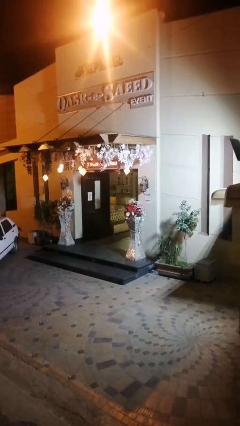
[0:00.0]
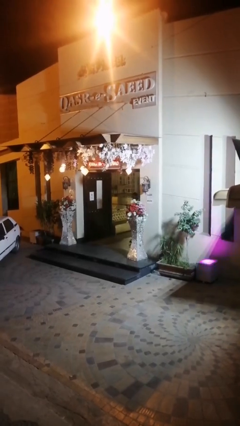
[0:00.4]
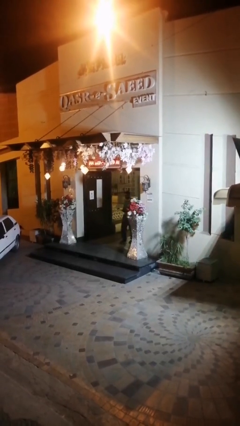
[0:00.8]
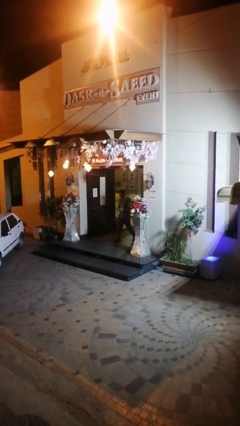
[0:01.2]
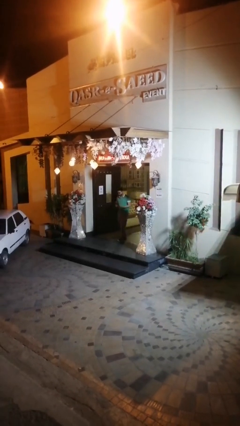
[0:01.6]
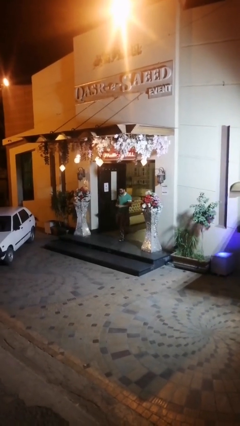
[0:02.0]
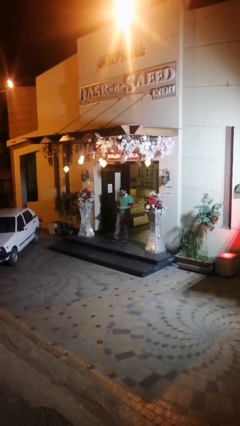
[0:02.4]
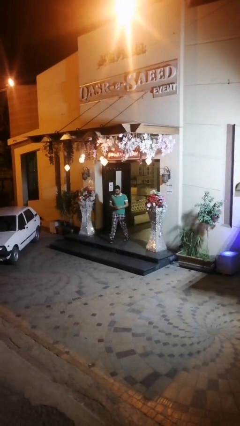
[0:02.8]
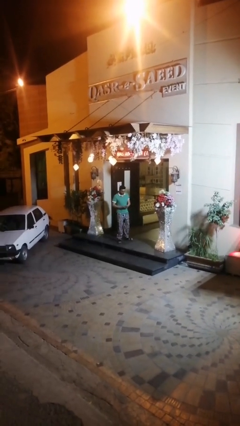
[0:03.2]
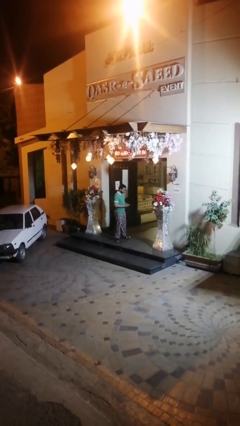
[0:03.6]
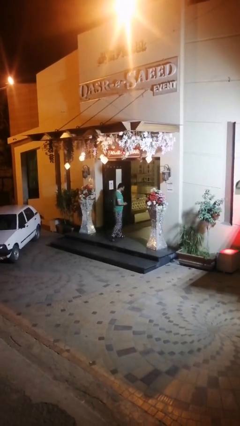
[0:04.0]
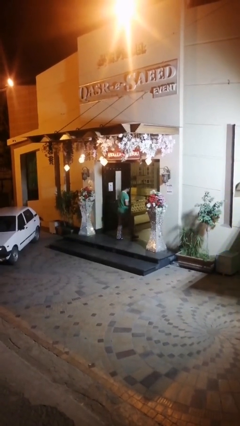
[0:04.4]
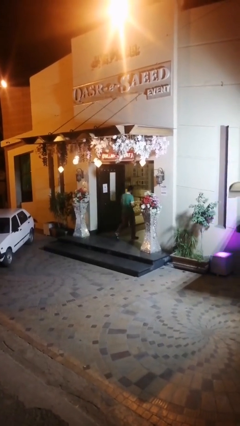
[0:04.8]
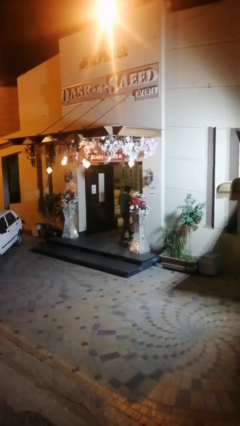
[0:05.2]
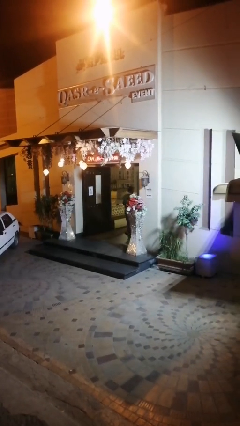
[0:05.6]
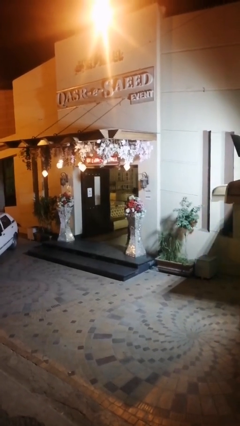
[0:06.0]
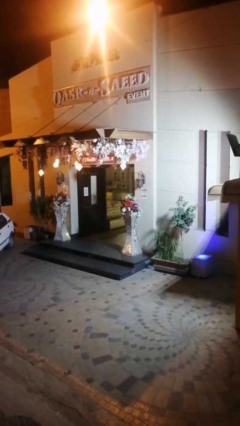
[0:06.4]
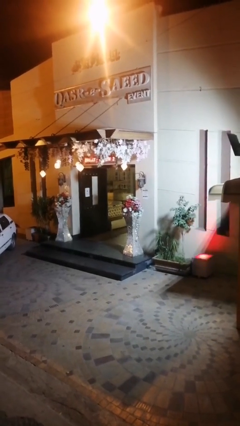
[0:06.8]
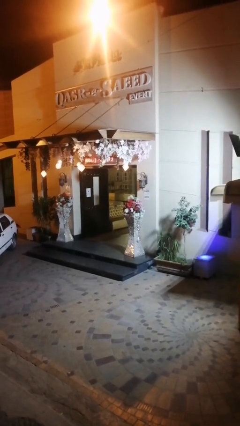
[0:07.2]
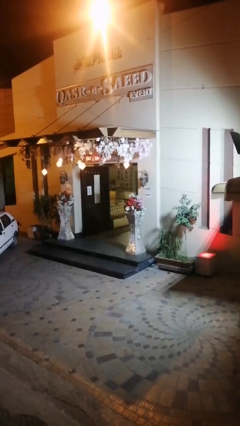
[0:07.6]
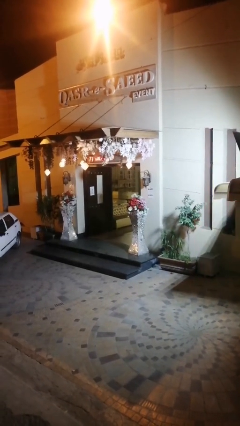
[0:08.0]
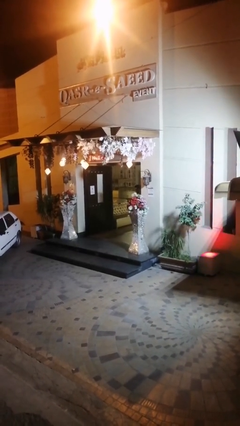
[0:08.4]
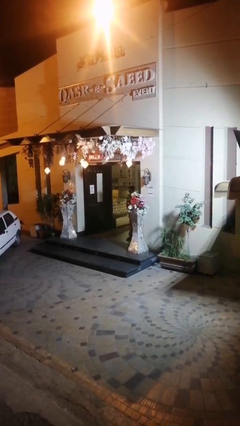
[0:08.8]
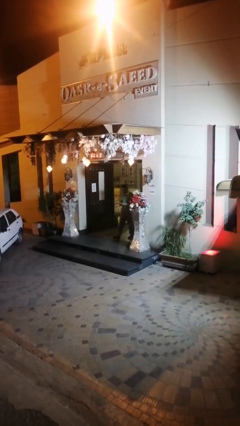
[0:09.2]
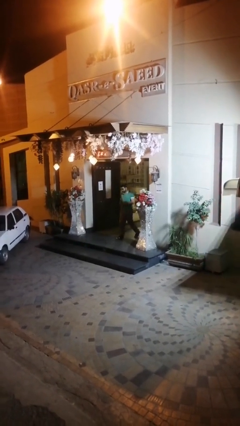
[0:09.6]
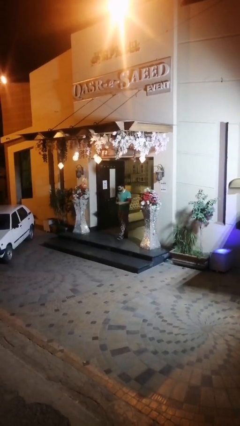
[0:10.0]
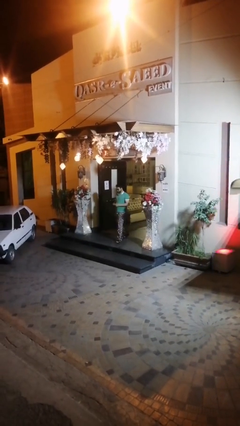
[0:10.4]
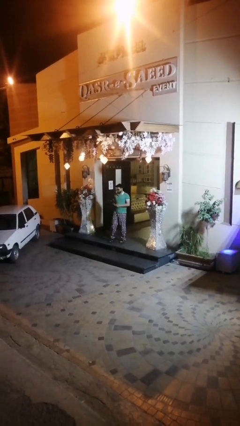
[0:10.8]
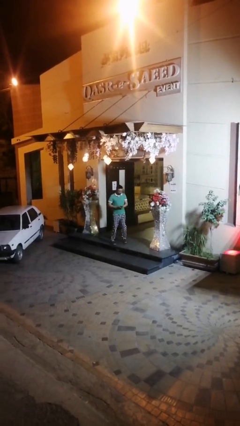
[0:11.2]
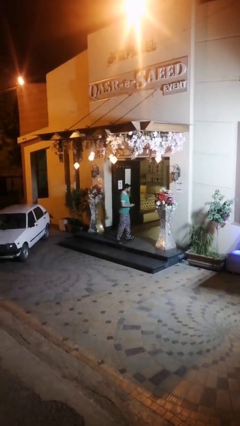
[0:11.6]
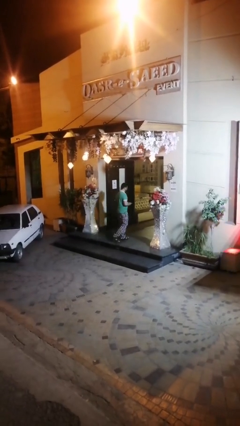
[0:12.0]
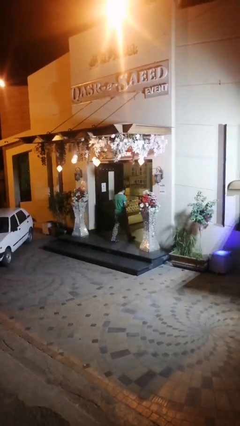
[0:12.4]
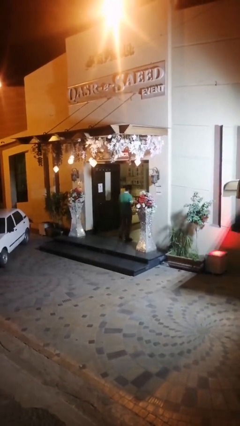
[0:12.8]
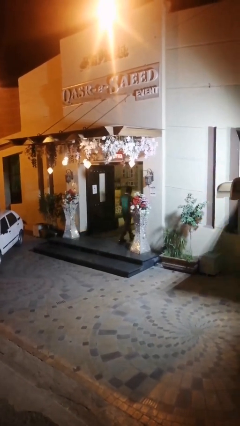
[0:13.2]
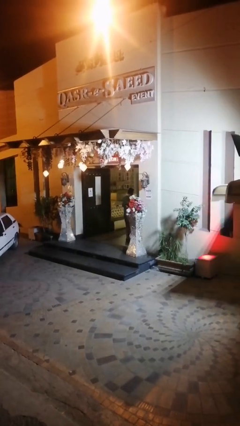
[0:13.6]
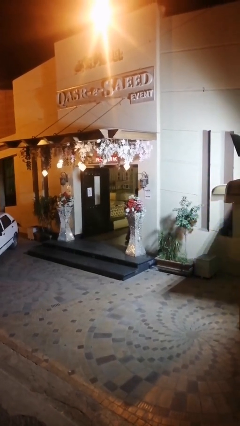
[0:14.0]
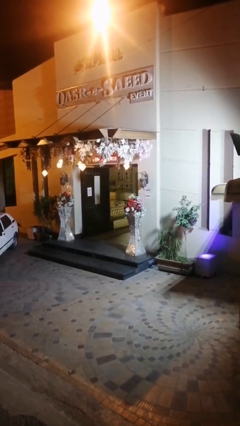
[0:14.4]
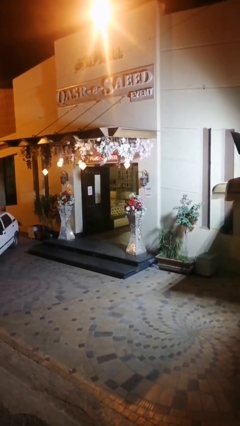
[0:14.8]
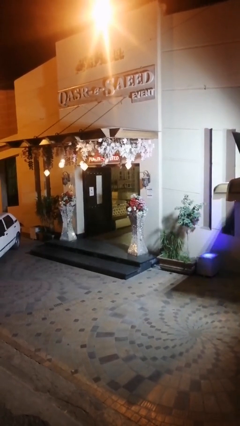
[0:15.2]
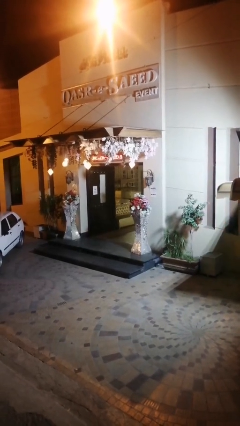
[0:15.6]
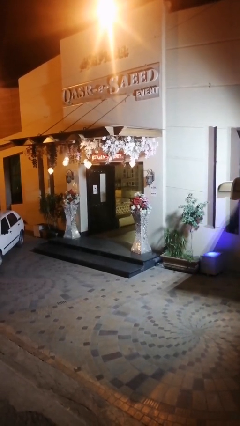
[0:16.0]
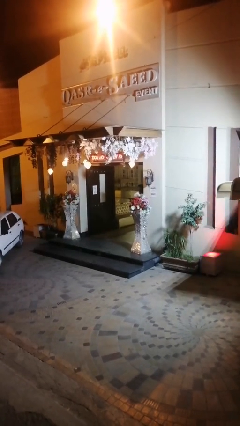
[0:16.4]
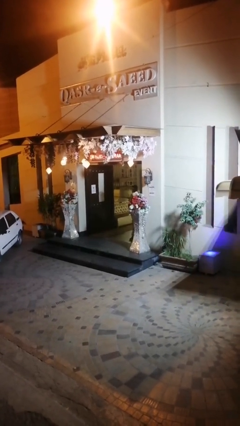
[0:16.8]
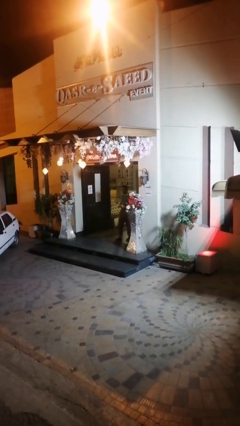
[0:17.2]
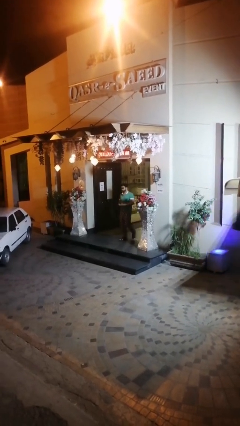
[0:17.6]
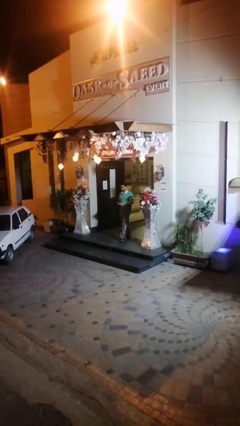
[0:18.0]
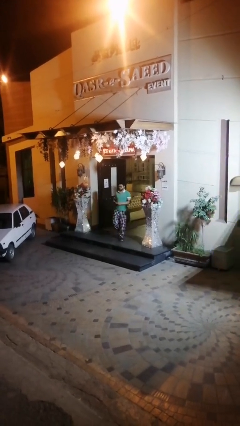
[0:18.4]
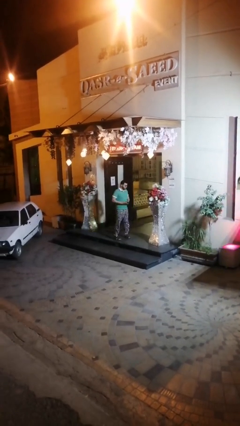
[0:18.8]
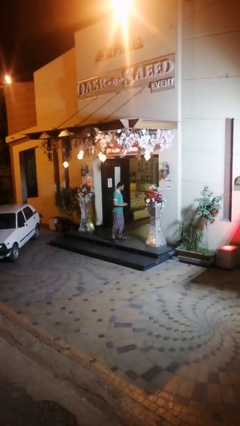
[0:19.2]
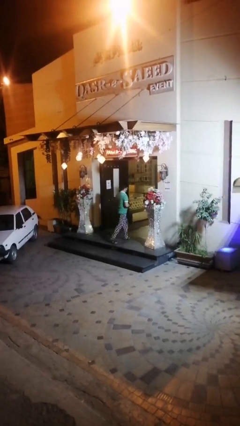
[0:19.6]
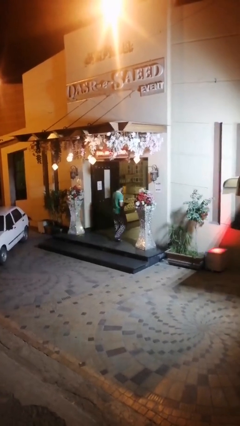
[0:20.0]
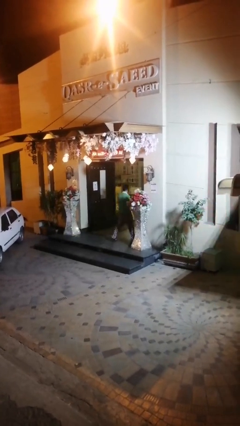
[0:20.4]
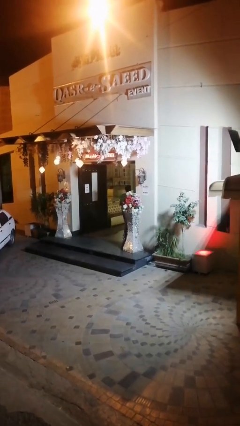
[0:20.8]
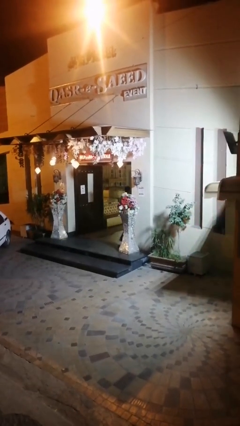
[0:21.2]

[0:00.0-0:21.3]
person texts on phone

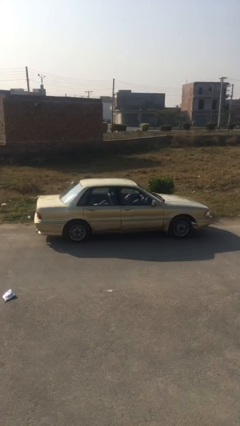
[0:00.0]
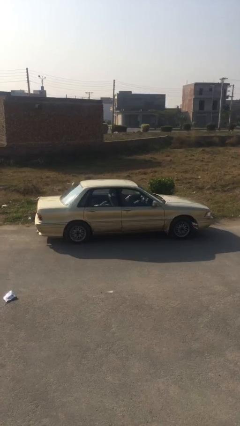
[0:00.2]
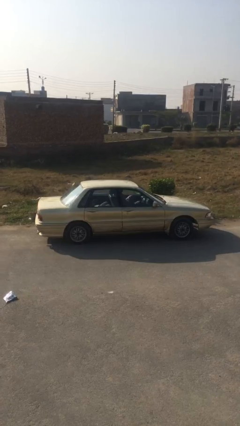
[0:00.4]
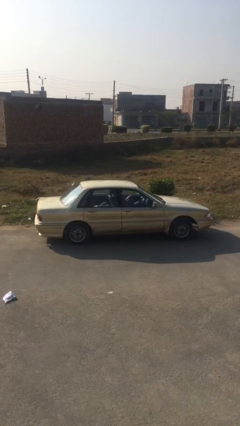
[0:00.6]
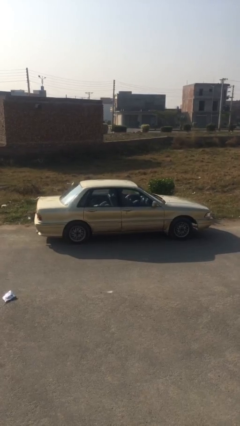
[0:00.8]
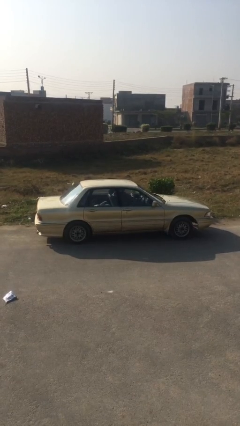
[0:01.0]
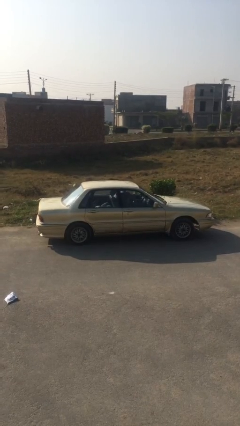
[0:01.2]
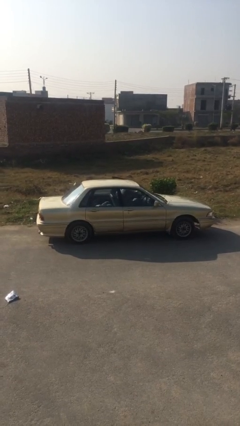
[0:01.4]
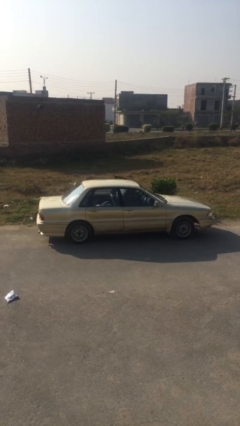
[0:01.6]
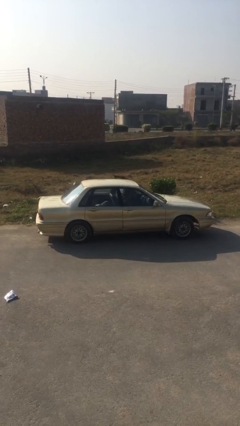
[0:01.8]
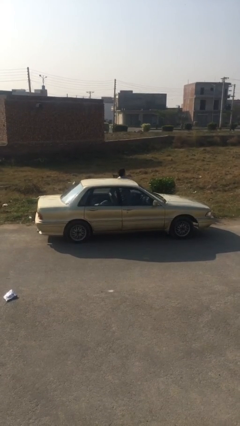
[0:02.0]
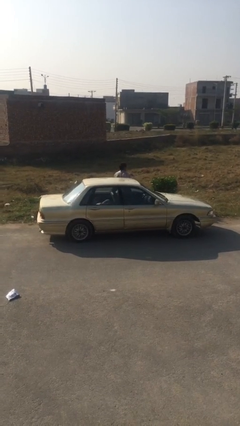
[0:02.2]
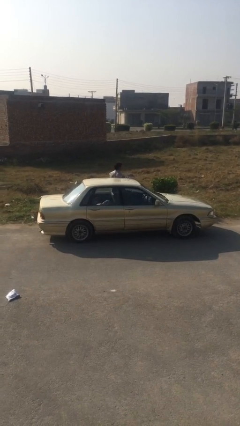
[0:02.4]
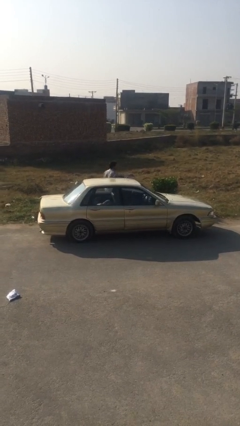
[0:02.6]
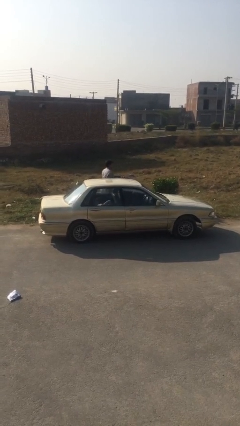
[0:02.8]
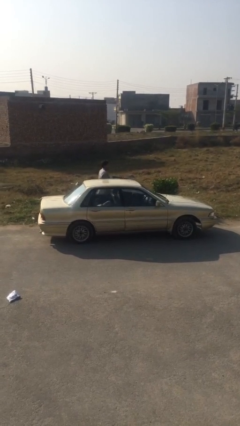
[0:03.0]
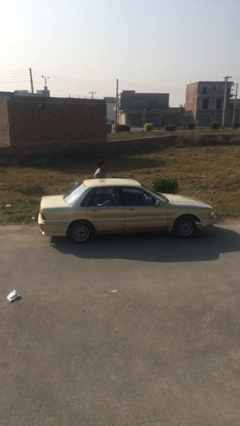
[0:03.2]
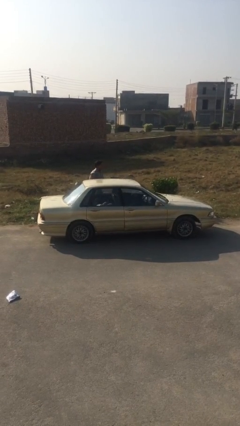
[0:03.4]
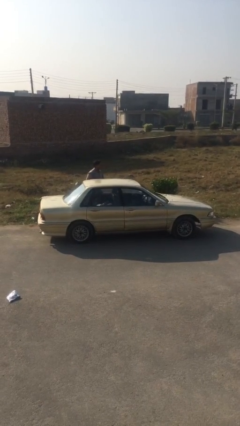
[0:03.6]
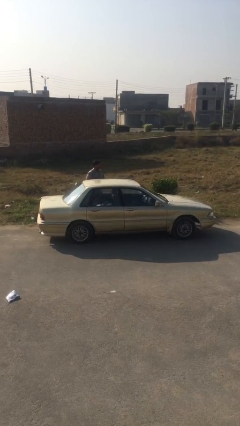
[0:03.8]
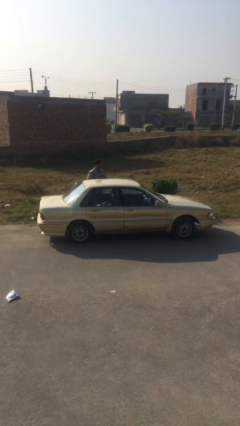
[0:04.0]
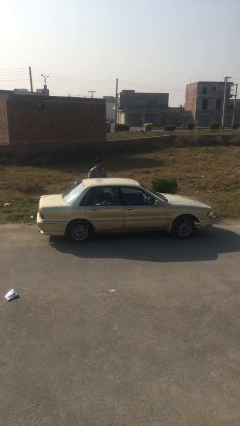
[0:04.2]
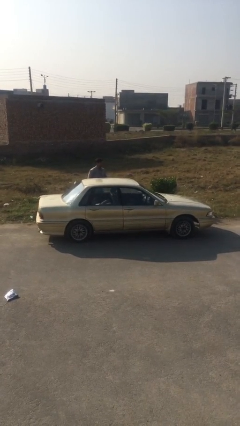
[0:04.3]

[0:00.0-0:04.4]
car drops off person

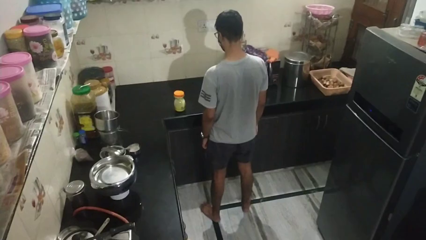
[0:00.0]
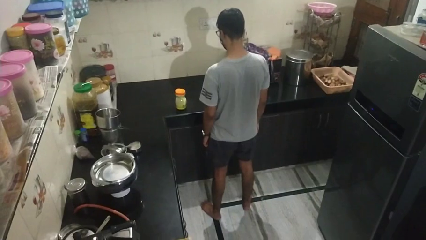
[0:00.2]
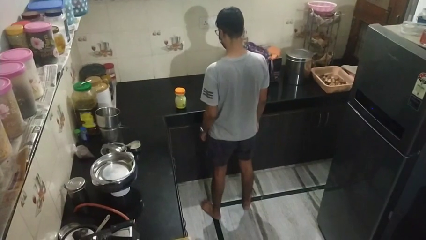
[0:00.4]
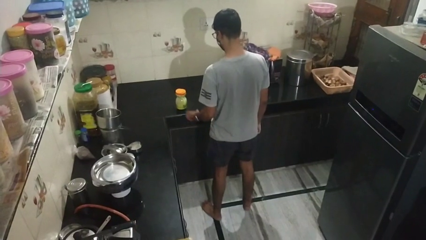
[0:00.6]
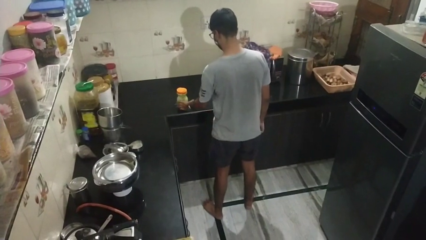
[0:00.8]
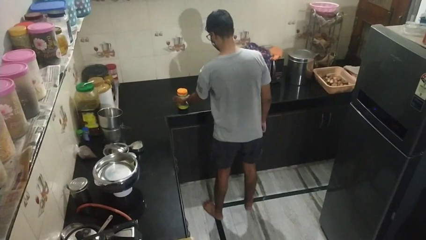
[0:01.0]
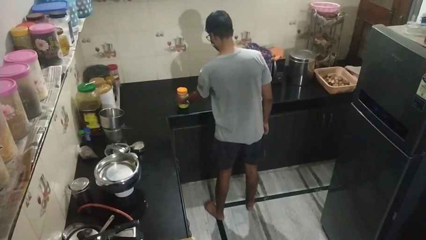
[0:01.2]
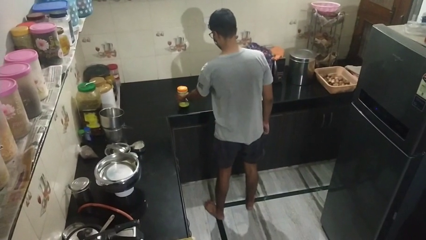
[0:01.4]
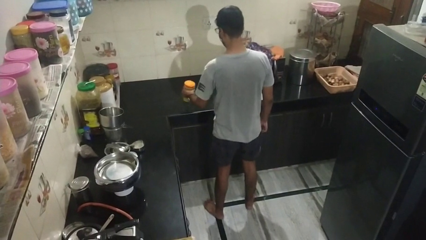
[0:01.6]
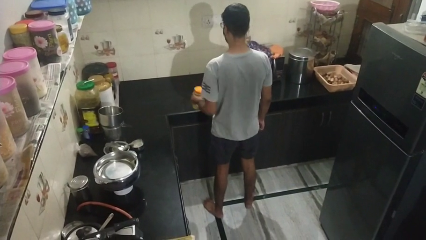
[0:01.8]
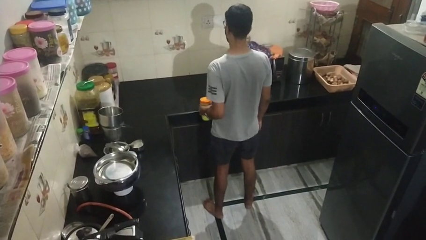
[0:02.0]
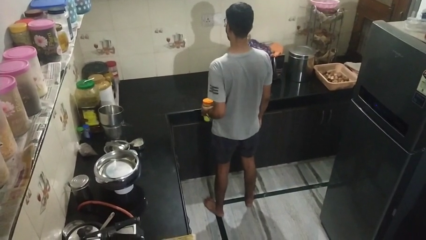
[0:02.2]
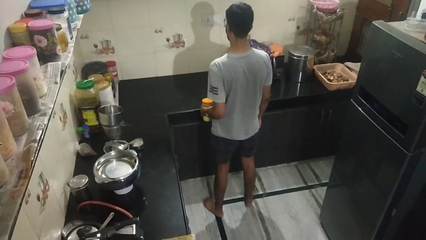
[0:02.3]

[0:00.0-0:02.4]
person picks up object from countertop
